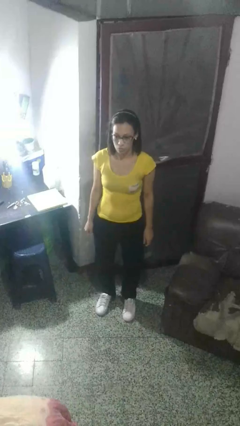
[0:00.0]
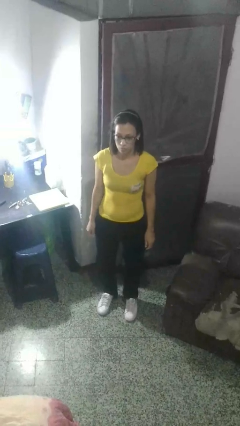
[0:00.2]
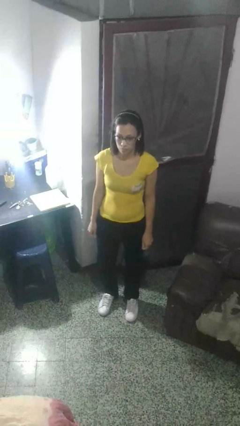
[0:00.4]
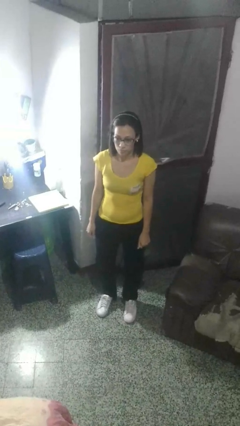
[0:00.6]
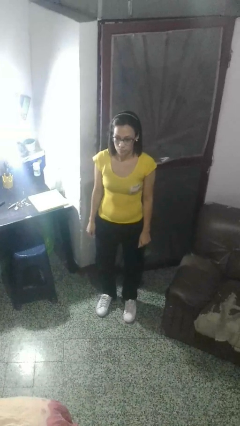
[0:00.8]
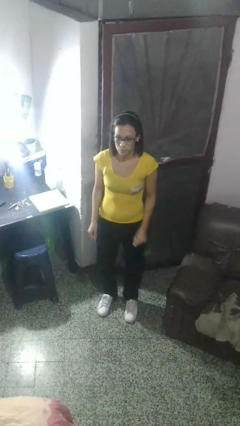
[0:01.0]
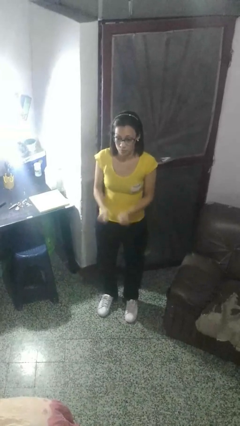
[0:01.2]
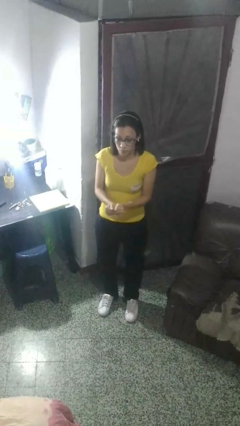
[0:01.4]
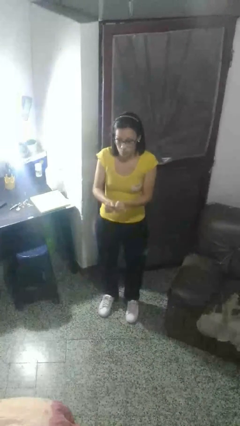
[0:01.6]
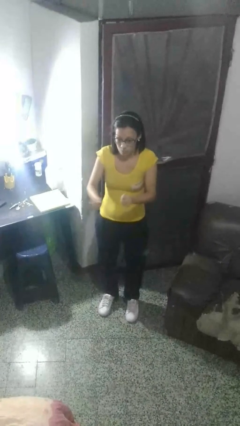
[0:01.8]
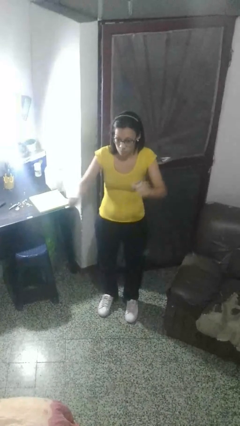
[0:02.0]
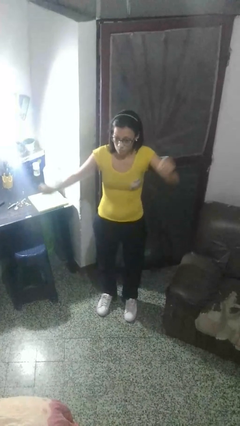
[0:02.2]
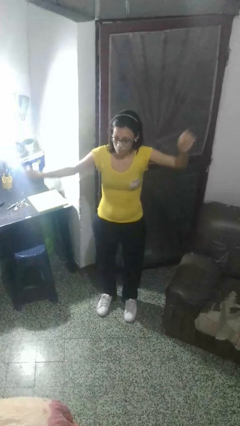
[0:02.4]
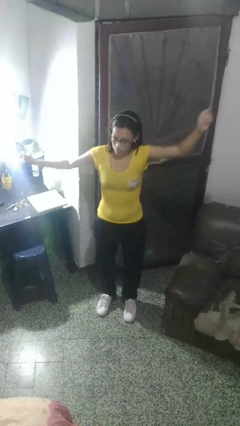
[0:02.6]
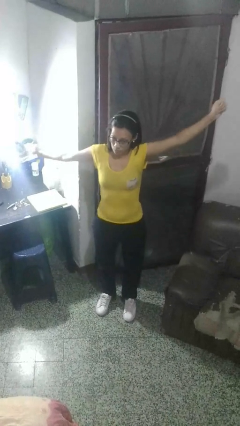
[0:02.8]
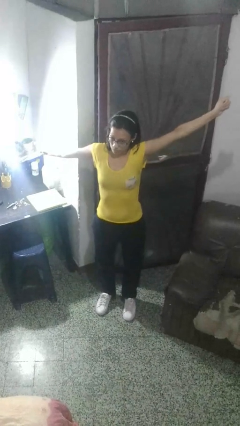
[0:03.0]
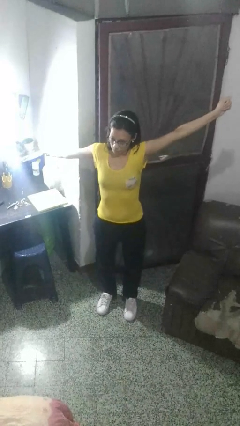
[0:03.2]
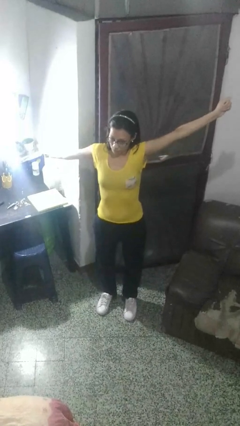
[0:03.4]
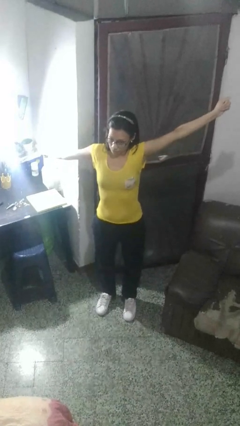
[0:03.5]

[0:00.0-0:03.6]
person gestures zoom in

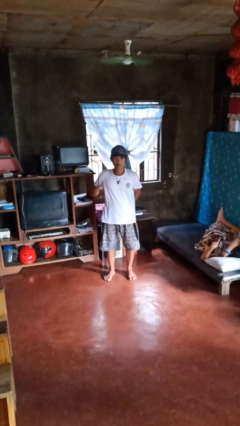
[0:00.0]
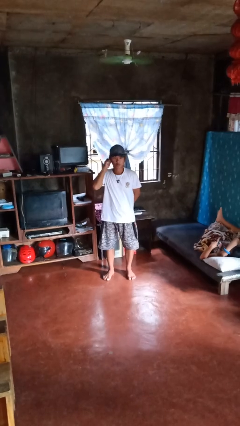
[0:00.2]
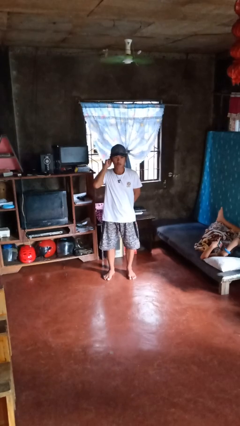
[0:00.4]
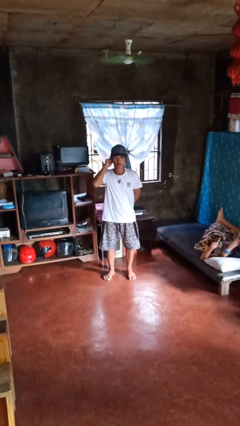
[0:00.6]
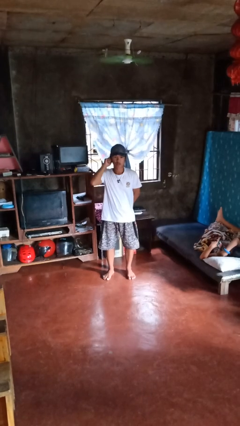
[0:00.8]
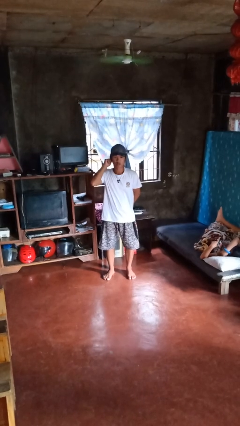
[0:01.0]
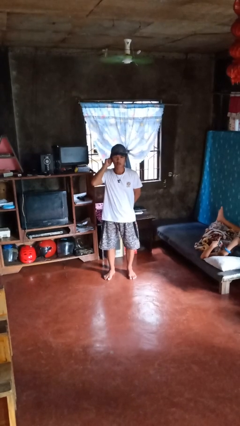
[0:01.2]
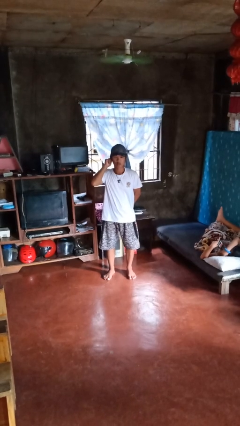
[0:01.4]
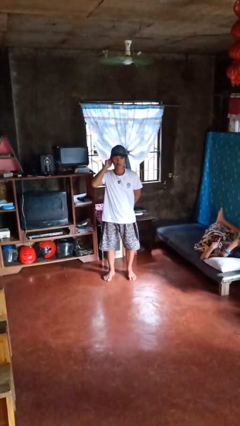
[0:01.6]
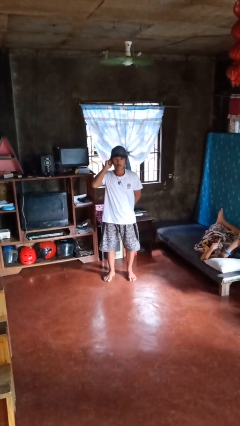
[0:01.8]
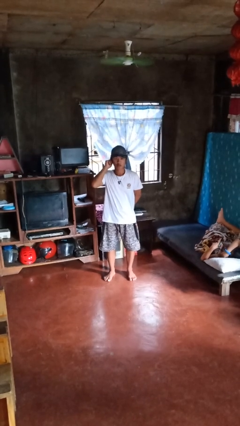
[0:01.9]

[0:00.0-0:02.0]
person touches earlobe

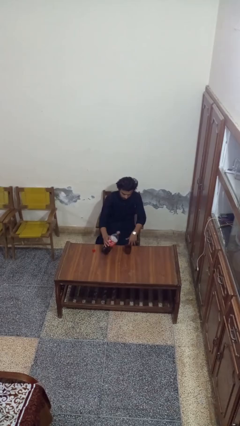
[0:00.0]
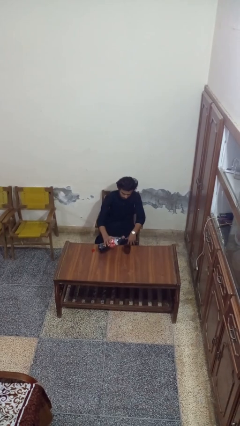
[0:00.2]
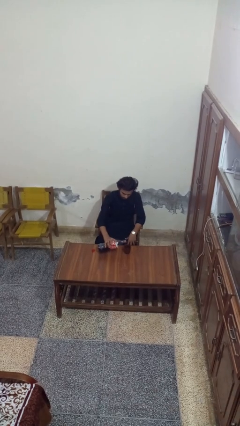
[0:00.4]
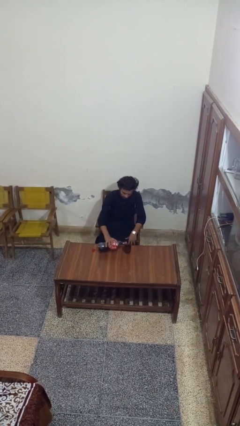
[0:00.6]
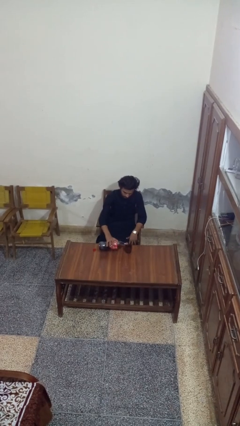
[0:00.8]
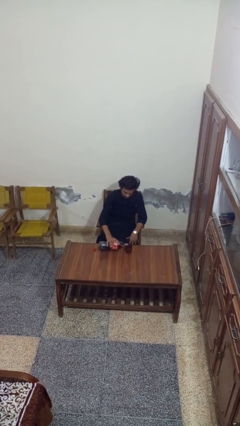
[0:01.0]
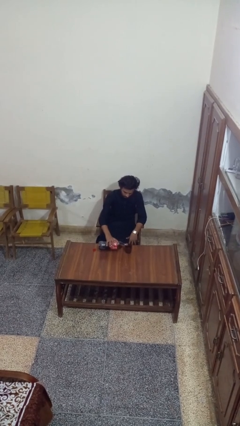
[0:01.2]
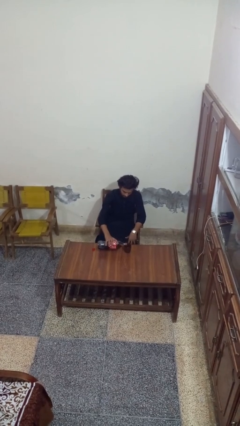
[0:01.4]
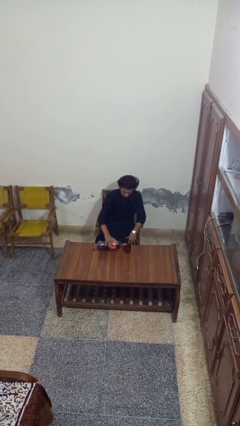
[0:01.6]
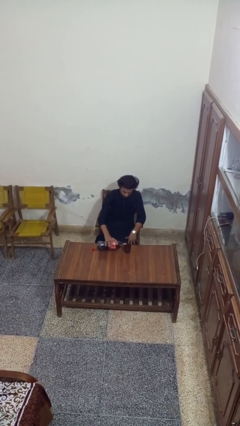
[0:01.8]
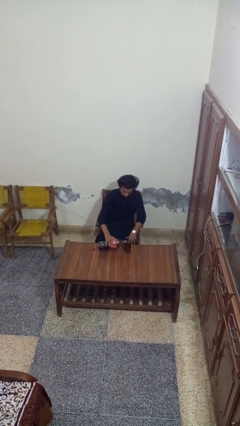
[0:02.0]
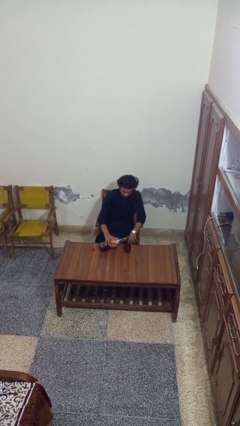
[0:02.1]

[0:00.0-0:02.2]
person pours liquid into cup

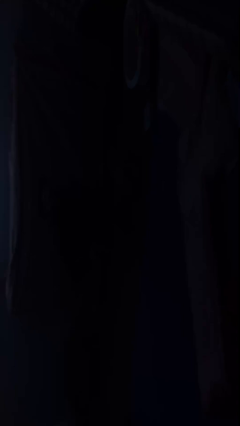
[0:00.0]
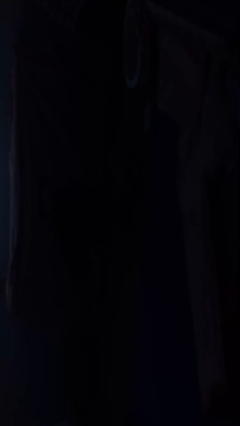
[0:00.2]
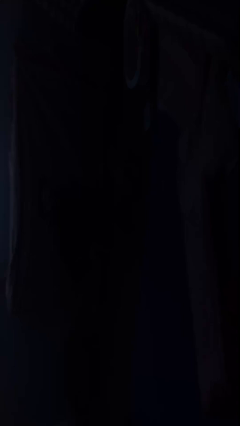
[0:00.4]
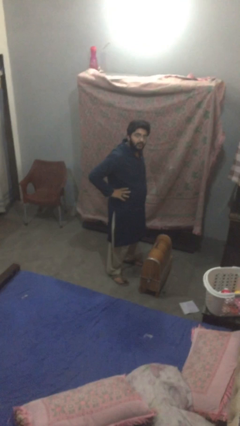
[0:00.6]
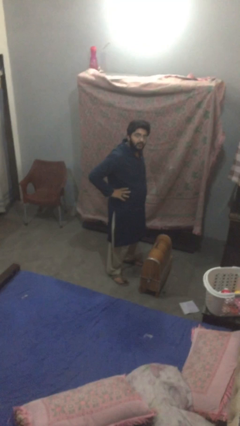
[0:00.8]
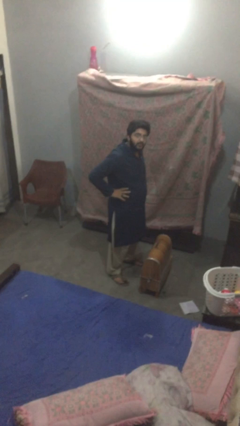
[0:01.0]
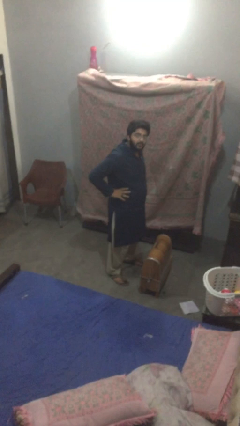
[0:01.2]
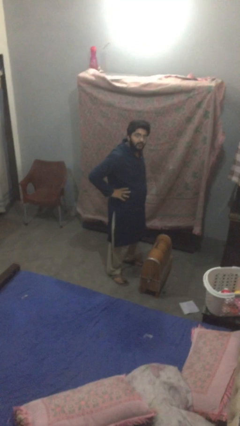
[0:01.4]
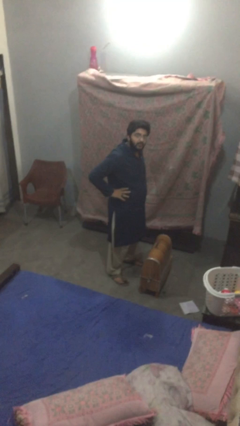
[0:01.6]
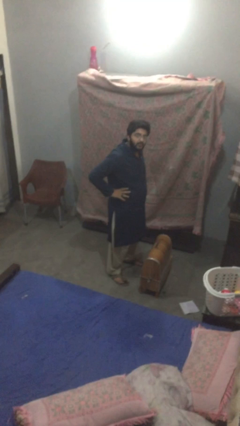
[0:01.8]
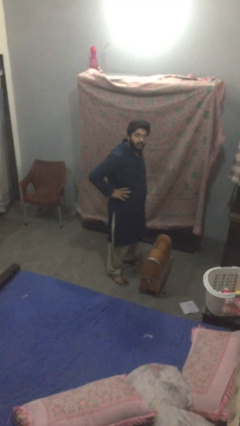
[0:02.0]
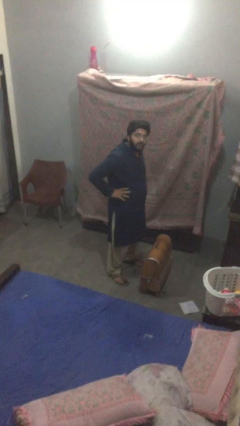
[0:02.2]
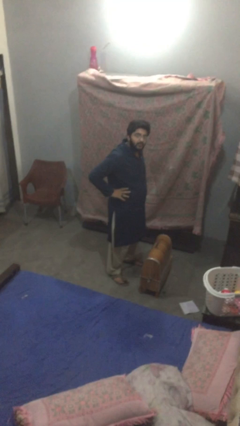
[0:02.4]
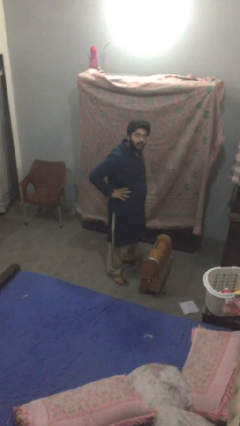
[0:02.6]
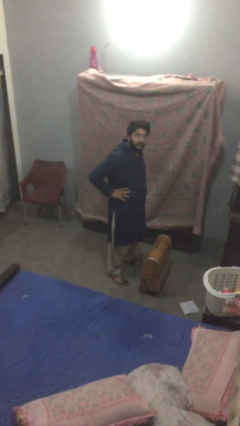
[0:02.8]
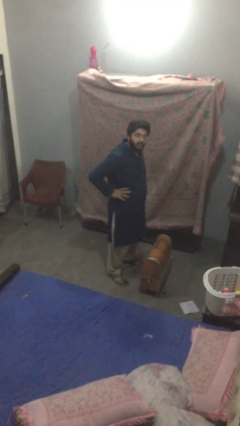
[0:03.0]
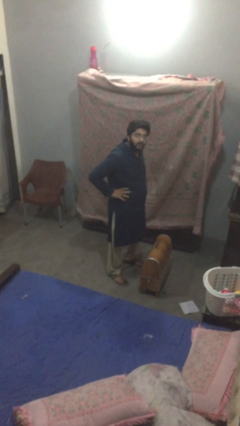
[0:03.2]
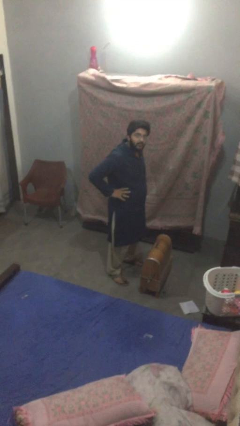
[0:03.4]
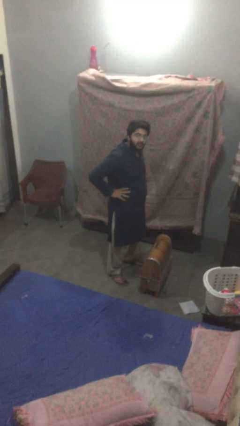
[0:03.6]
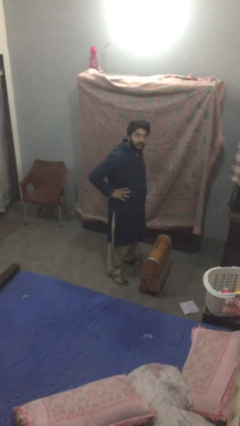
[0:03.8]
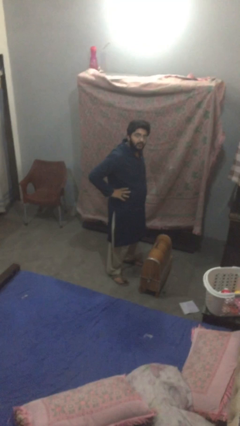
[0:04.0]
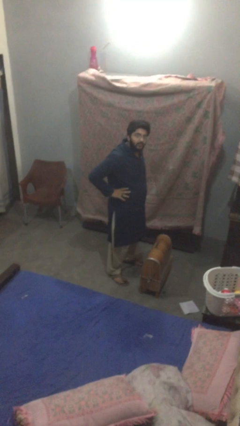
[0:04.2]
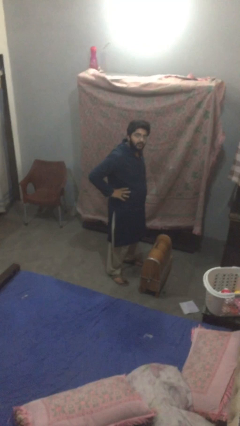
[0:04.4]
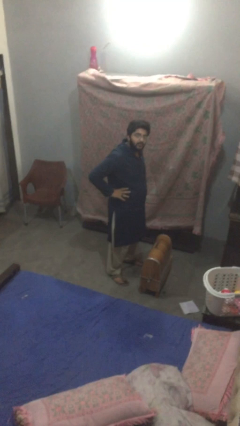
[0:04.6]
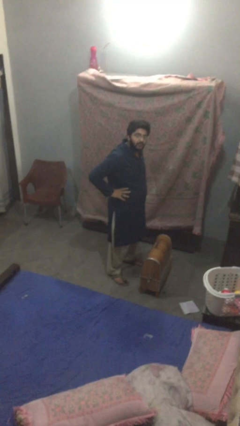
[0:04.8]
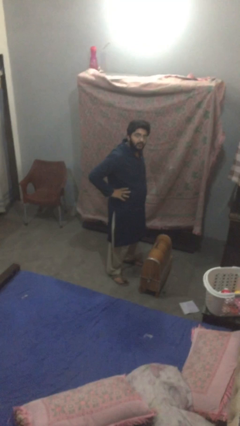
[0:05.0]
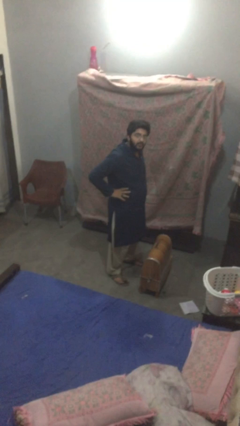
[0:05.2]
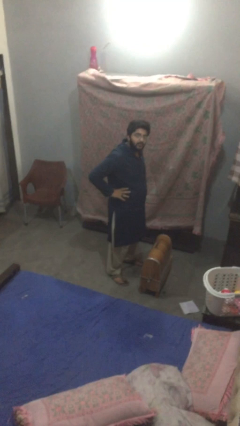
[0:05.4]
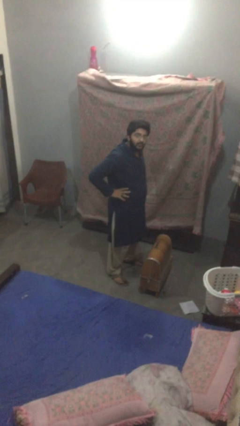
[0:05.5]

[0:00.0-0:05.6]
person picks up object from floor

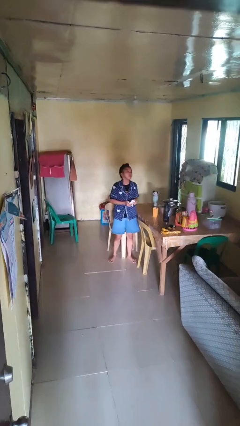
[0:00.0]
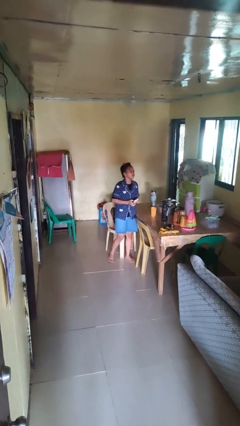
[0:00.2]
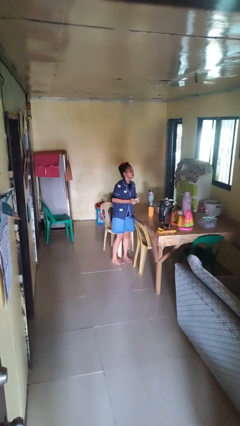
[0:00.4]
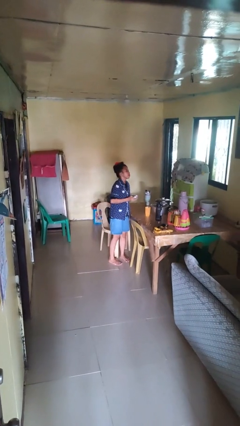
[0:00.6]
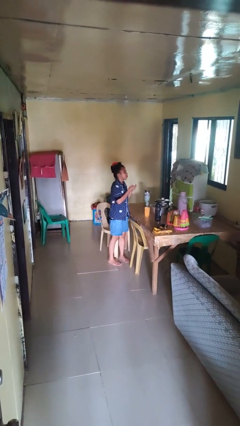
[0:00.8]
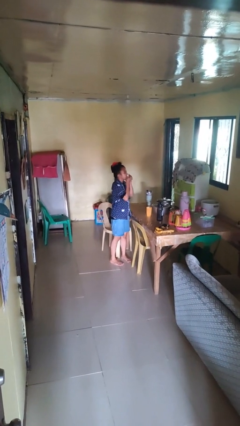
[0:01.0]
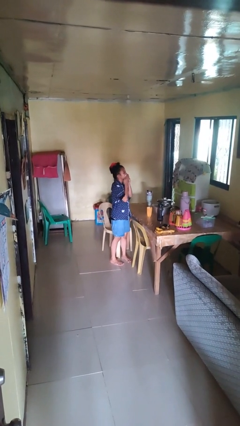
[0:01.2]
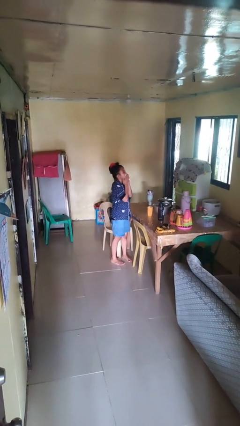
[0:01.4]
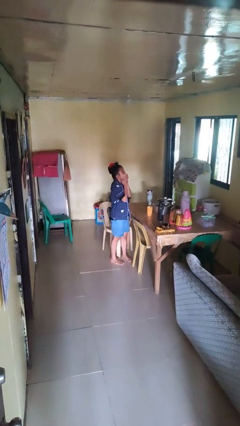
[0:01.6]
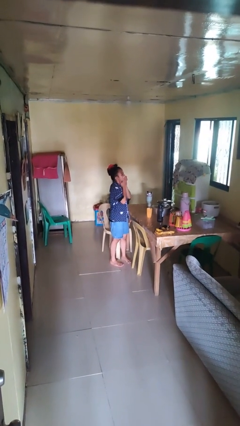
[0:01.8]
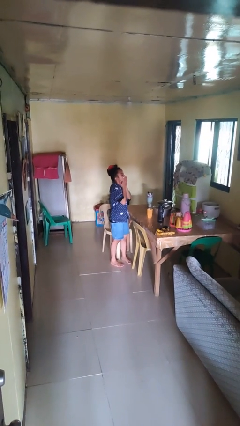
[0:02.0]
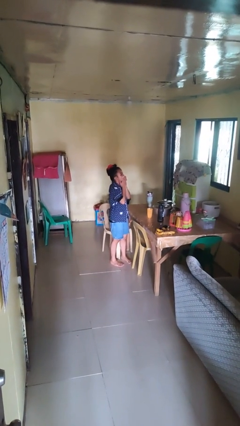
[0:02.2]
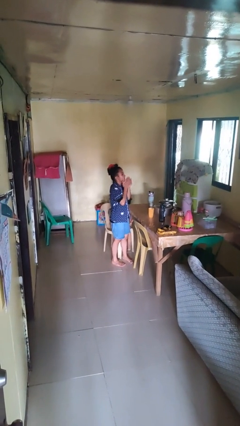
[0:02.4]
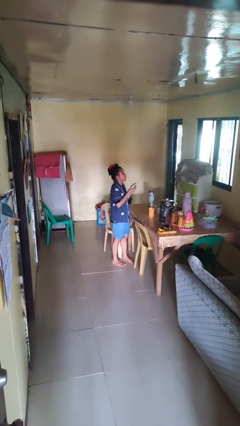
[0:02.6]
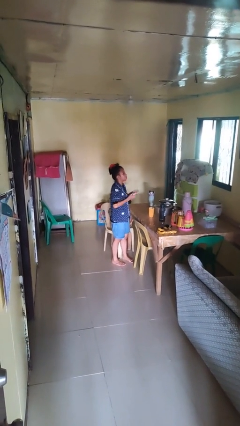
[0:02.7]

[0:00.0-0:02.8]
person wipes mouth with napkin

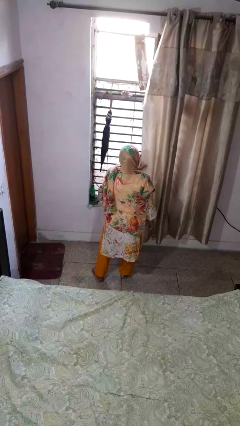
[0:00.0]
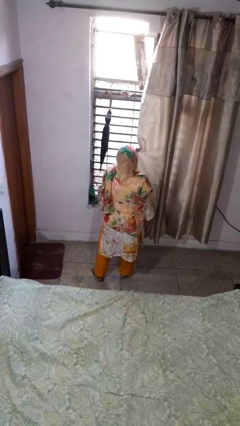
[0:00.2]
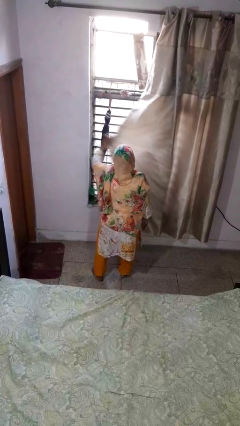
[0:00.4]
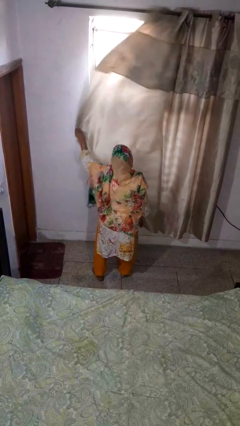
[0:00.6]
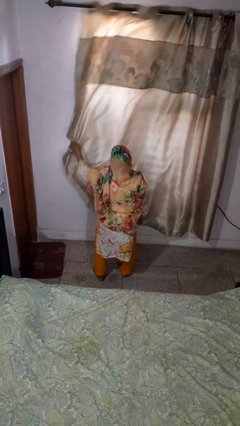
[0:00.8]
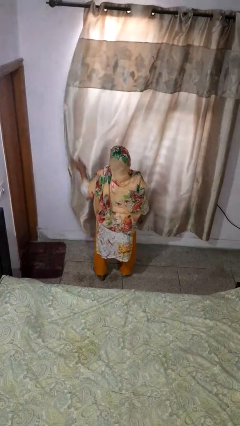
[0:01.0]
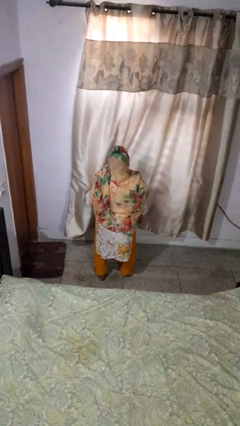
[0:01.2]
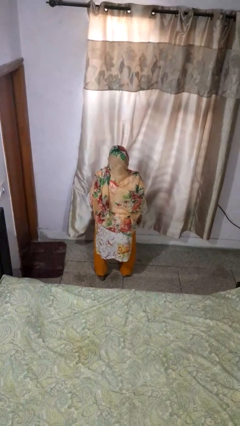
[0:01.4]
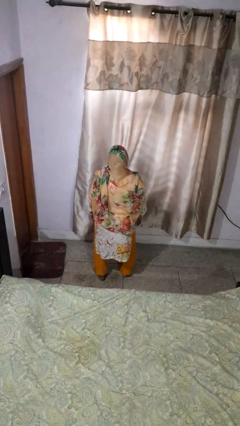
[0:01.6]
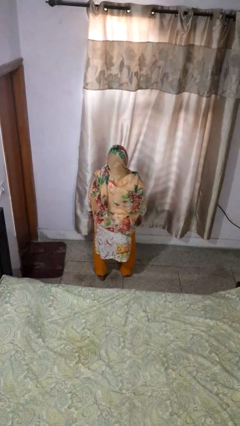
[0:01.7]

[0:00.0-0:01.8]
person closes curtains
